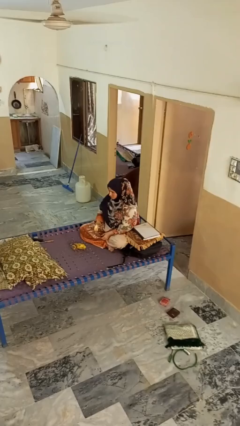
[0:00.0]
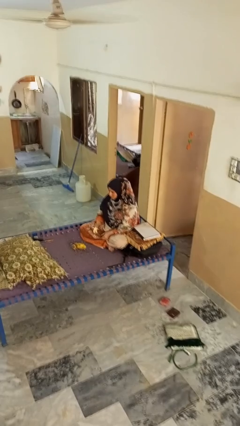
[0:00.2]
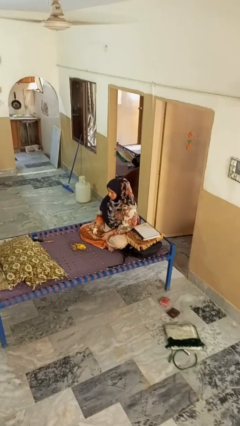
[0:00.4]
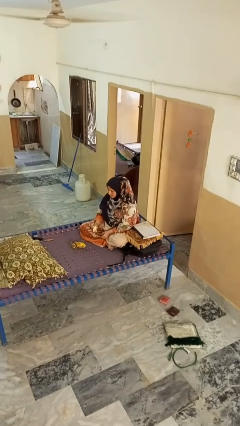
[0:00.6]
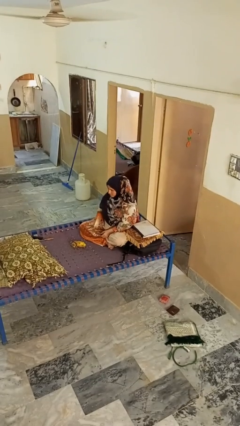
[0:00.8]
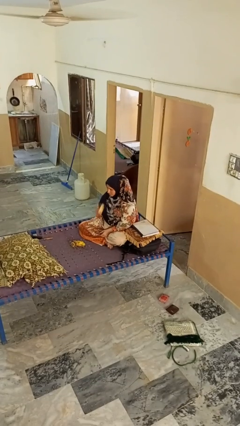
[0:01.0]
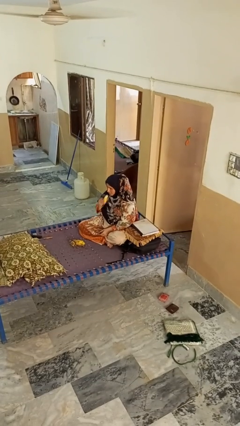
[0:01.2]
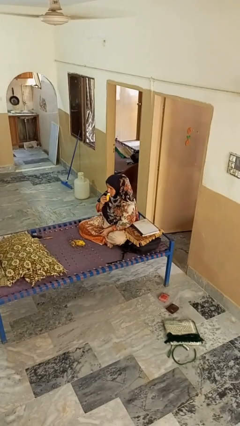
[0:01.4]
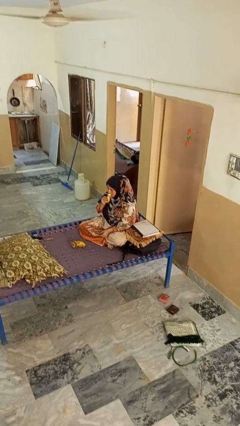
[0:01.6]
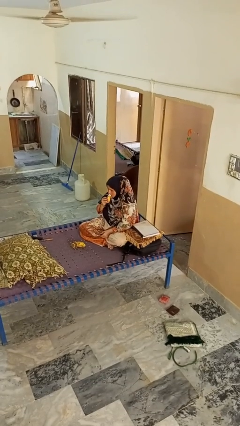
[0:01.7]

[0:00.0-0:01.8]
person eats banana

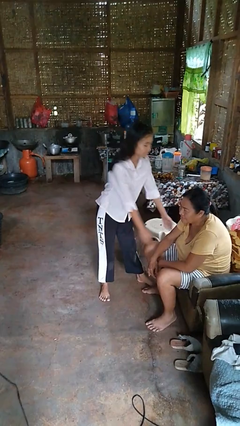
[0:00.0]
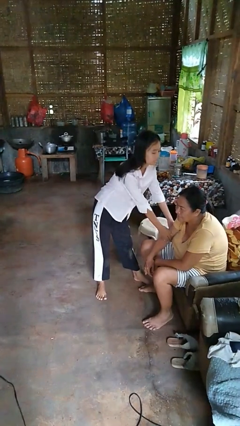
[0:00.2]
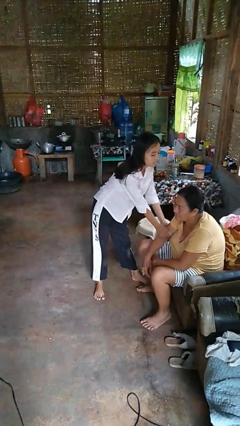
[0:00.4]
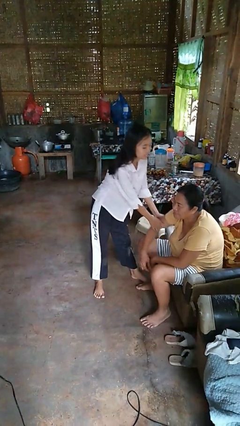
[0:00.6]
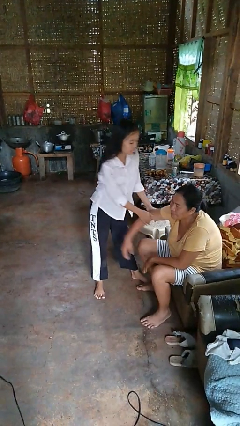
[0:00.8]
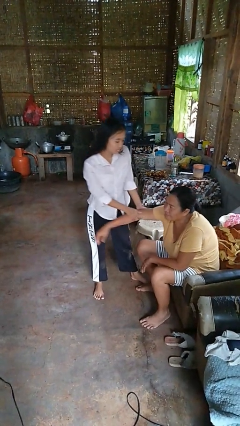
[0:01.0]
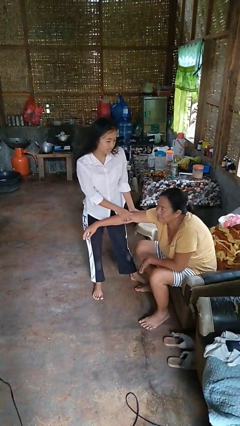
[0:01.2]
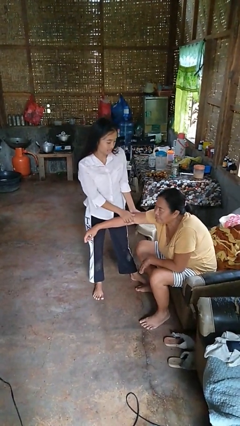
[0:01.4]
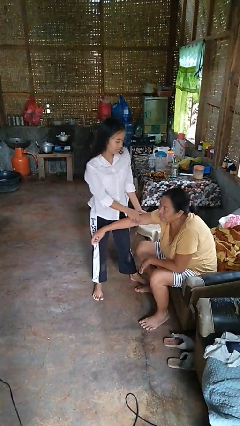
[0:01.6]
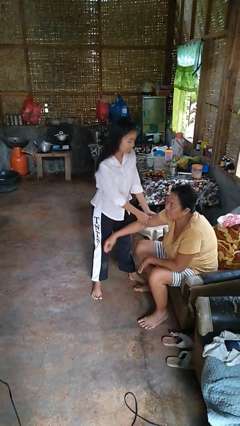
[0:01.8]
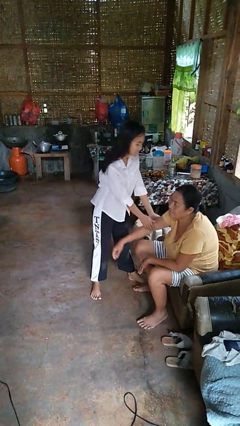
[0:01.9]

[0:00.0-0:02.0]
person grabs person by bicep

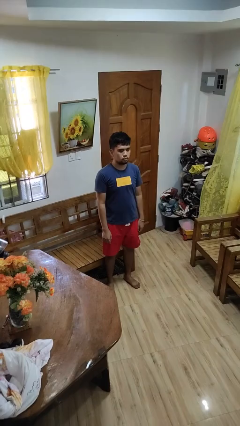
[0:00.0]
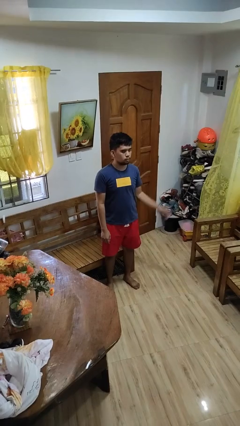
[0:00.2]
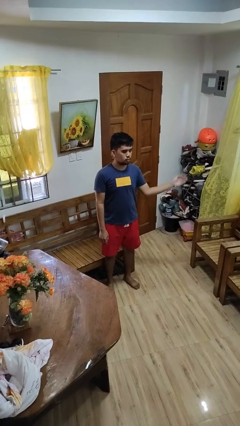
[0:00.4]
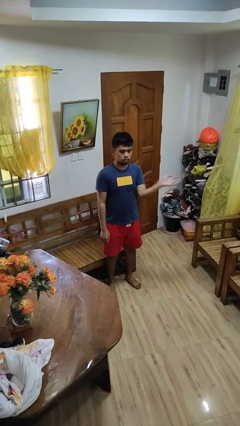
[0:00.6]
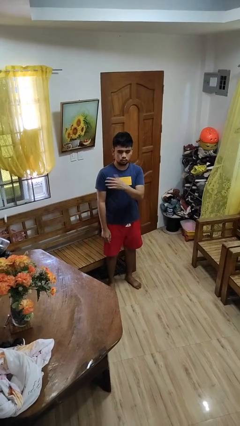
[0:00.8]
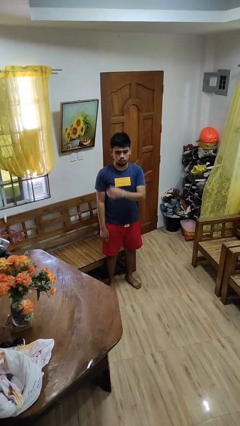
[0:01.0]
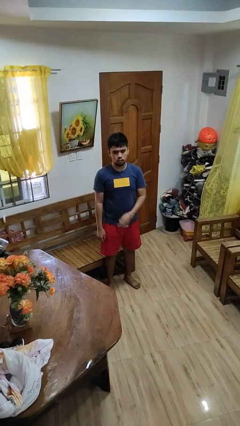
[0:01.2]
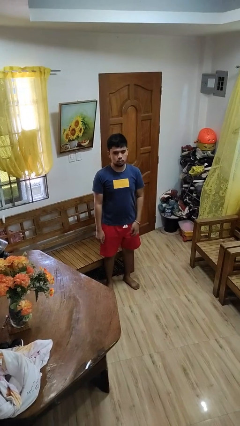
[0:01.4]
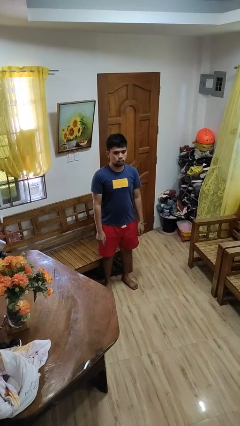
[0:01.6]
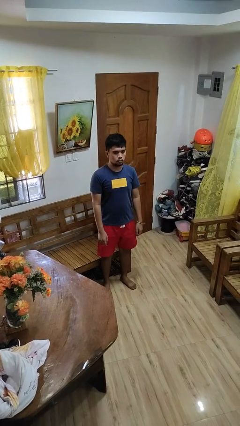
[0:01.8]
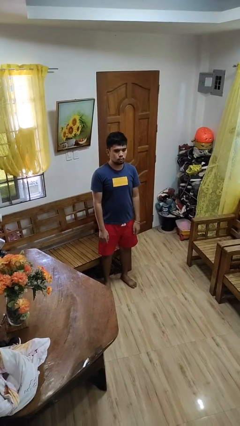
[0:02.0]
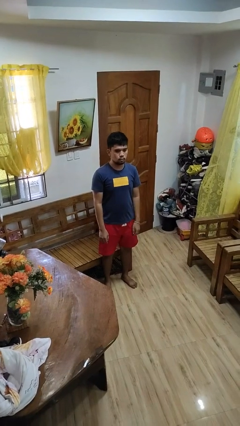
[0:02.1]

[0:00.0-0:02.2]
person gestures swipe right

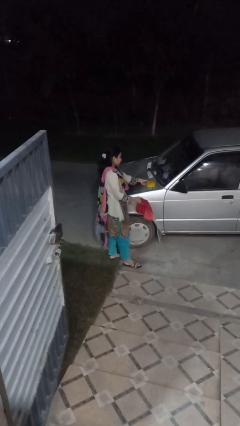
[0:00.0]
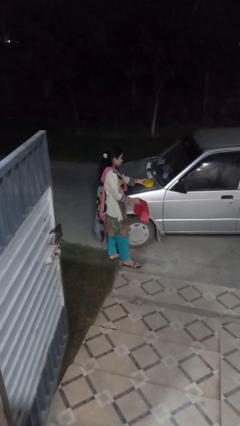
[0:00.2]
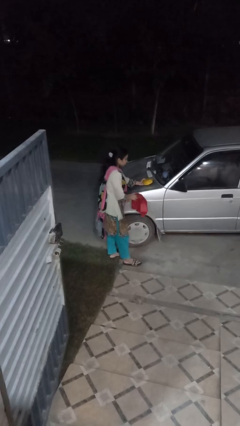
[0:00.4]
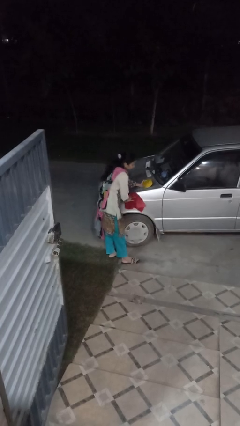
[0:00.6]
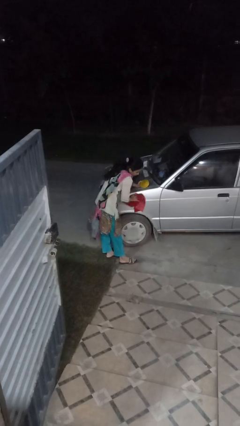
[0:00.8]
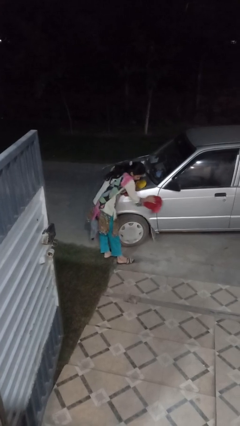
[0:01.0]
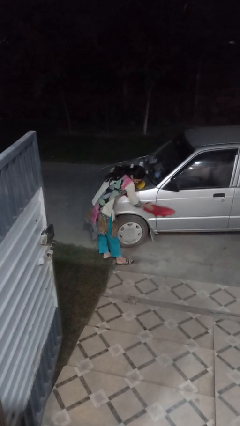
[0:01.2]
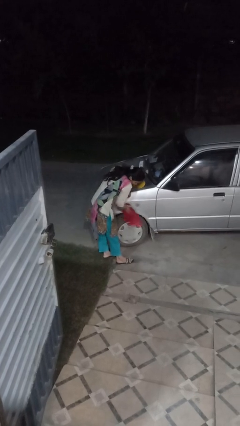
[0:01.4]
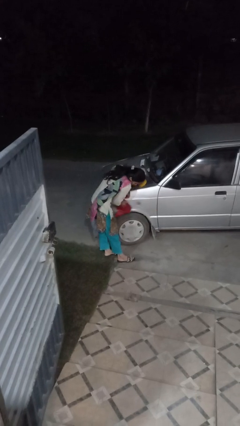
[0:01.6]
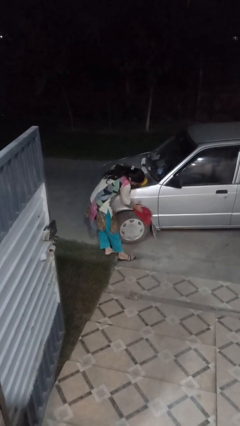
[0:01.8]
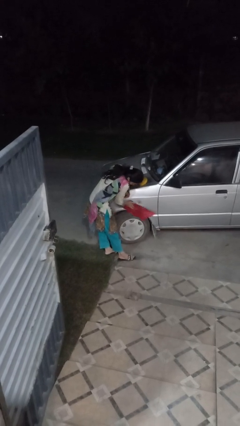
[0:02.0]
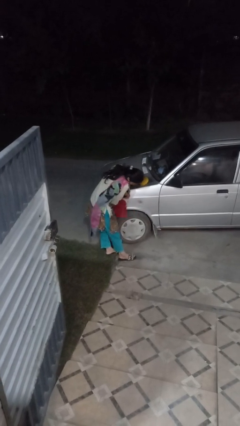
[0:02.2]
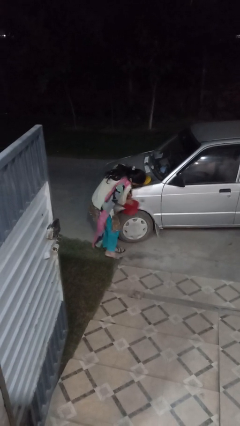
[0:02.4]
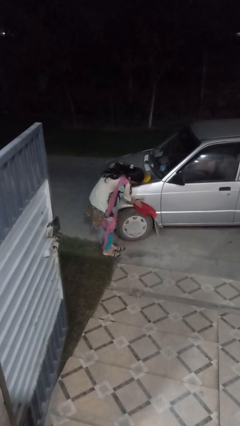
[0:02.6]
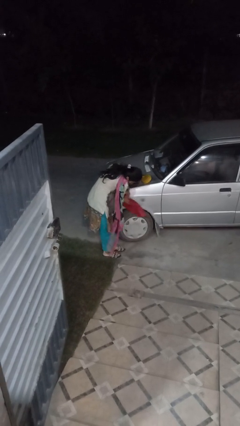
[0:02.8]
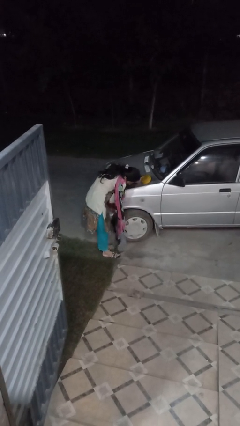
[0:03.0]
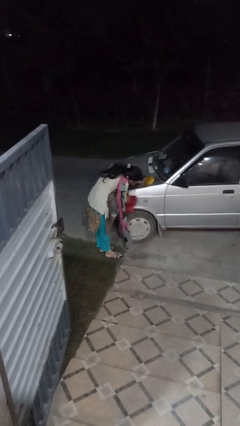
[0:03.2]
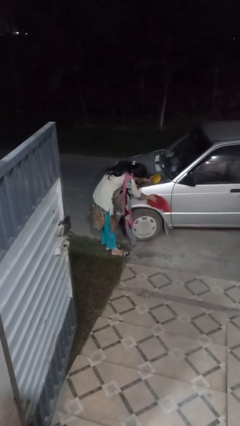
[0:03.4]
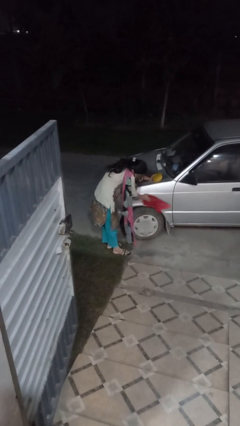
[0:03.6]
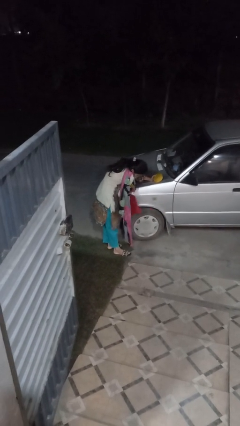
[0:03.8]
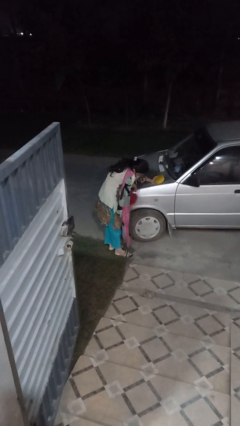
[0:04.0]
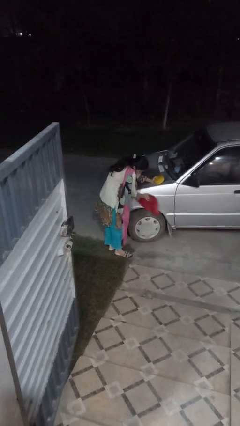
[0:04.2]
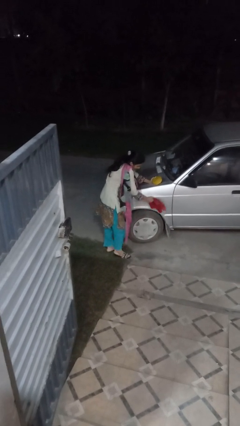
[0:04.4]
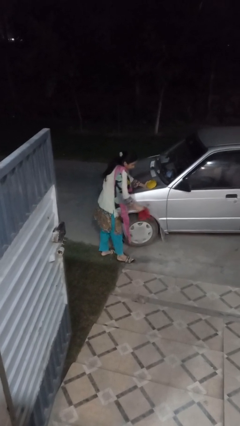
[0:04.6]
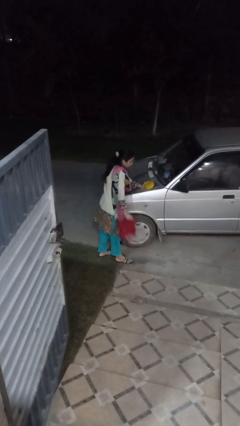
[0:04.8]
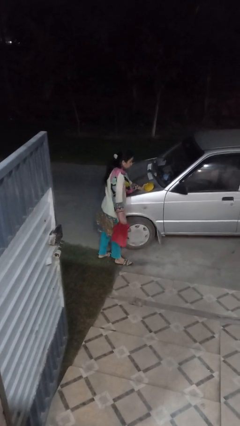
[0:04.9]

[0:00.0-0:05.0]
person polishes car with rag

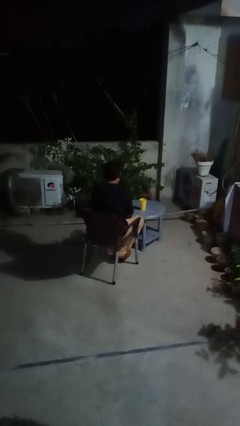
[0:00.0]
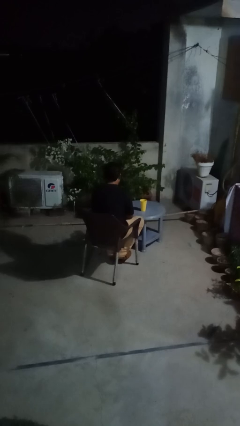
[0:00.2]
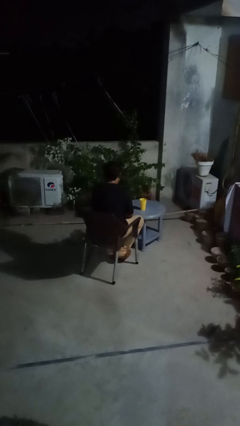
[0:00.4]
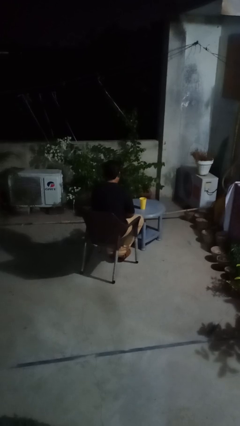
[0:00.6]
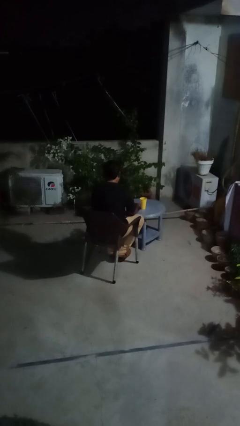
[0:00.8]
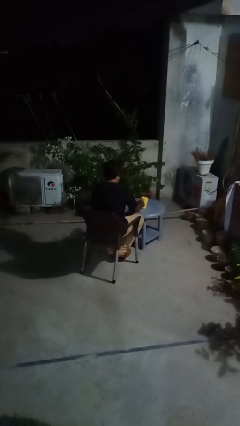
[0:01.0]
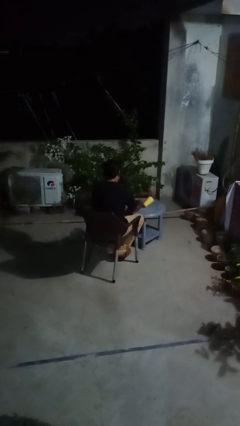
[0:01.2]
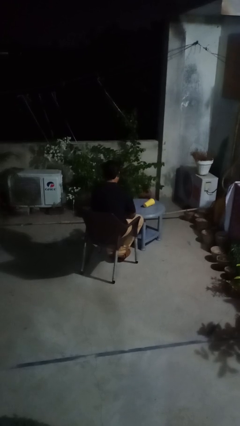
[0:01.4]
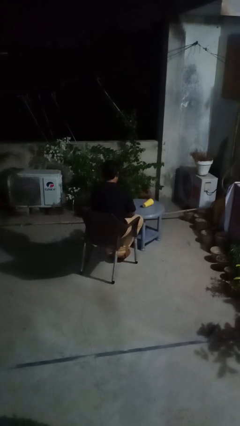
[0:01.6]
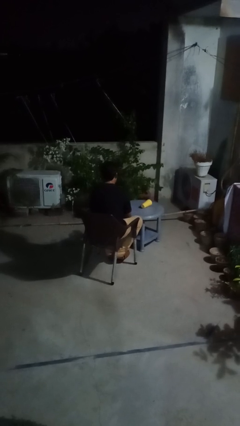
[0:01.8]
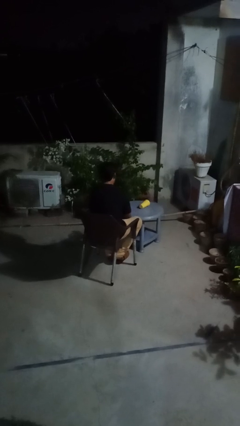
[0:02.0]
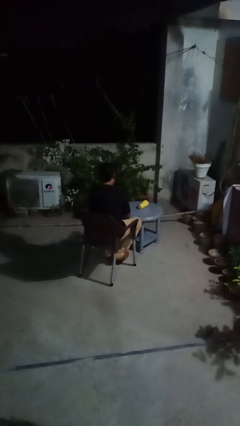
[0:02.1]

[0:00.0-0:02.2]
person knocks over glass

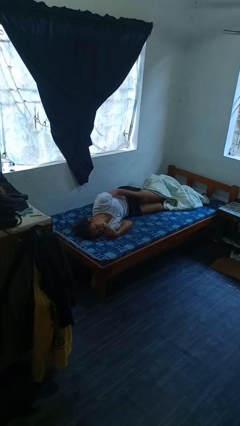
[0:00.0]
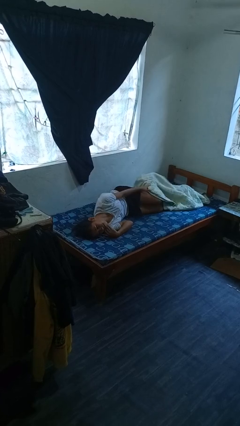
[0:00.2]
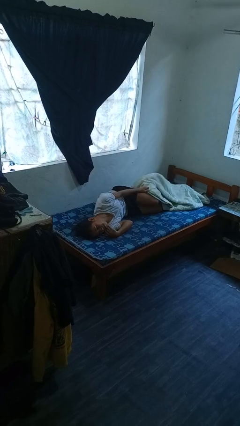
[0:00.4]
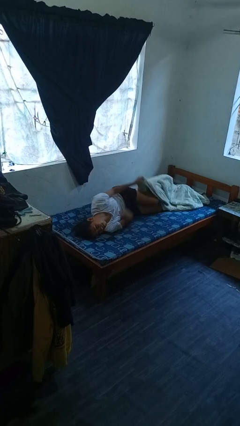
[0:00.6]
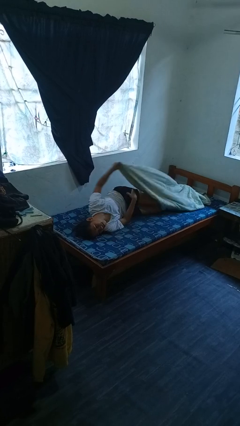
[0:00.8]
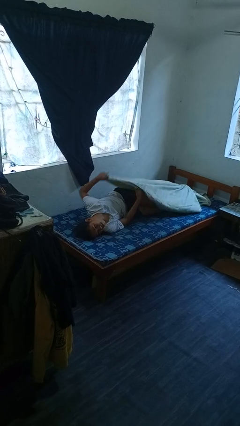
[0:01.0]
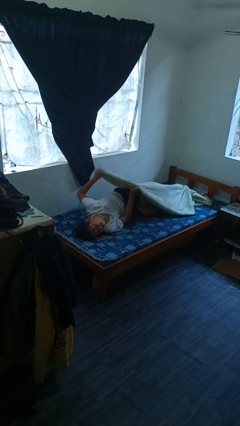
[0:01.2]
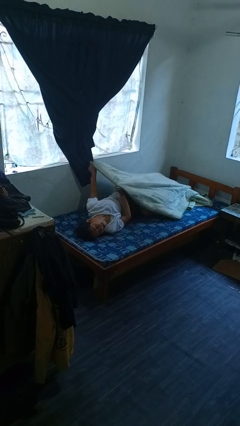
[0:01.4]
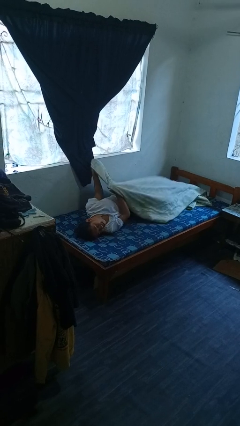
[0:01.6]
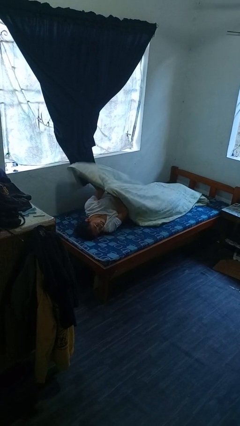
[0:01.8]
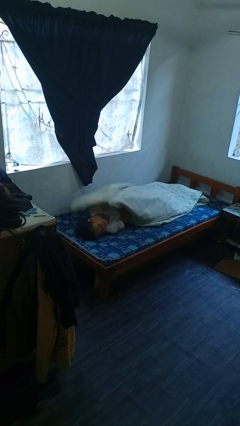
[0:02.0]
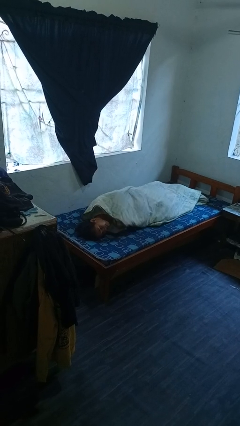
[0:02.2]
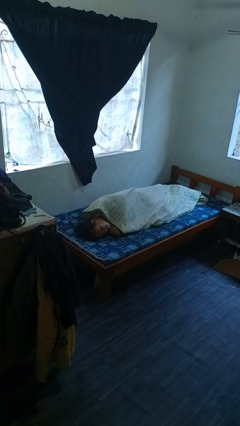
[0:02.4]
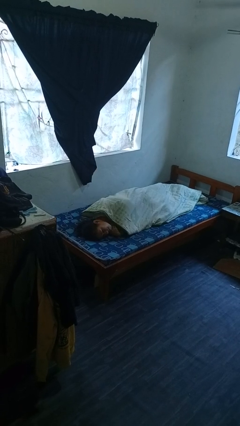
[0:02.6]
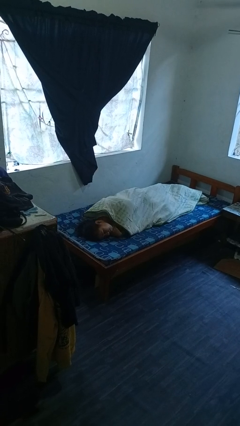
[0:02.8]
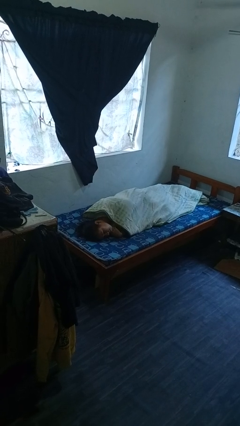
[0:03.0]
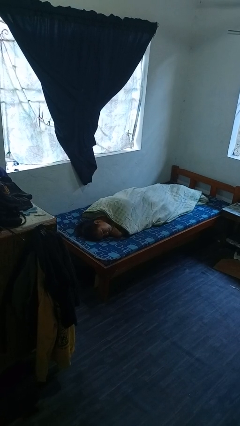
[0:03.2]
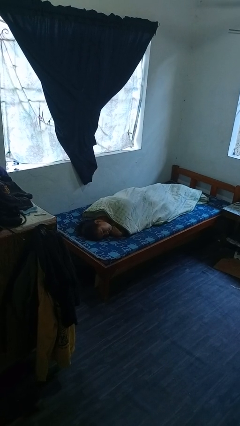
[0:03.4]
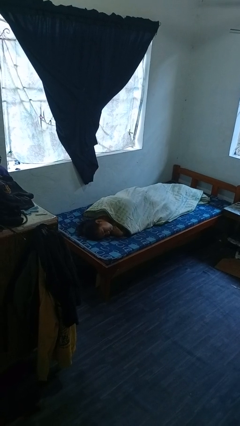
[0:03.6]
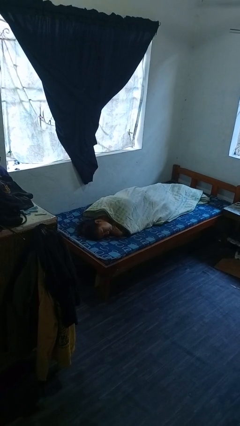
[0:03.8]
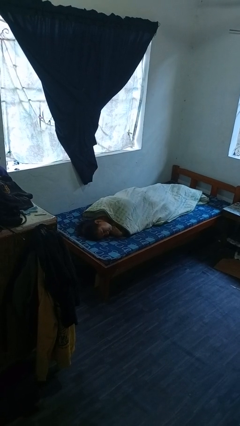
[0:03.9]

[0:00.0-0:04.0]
person covers with bedsheets
